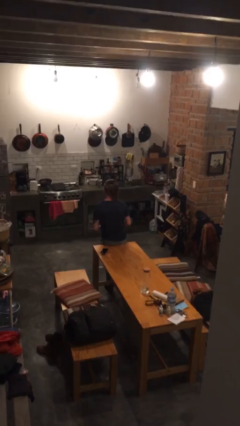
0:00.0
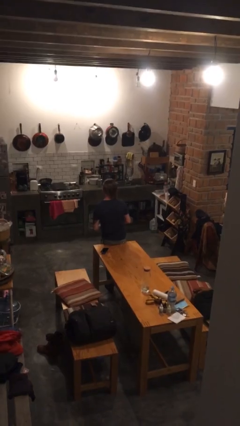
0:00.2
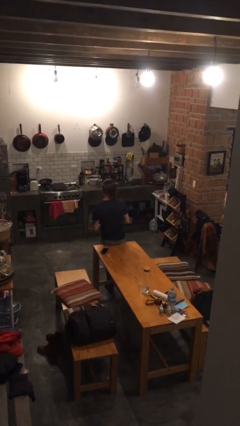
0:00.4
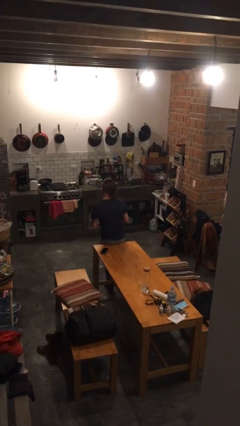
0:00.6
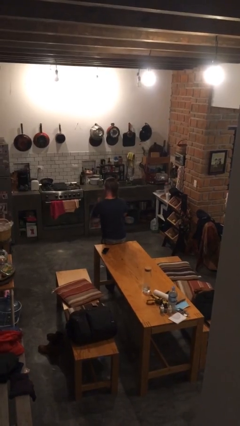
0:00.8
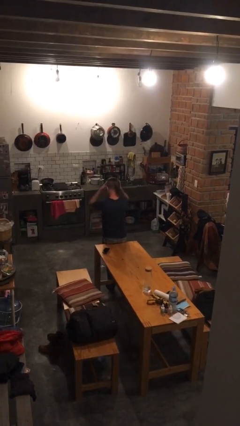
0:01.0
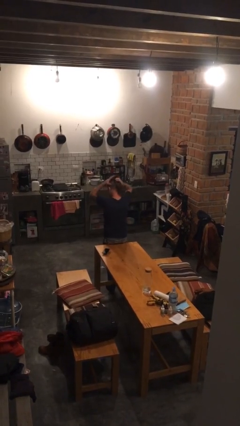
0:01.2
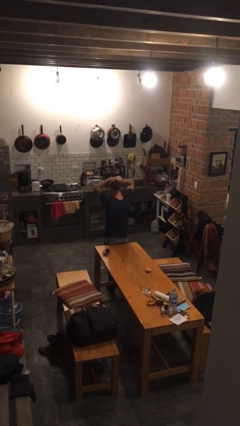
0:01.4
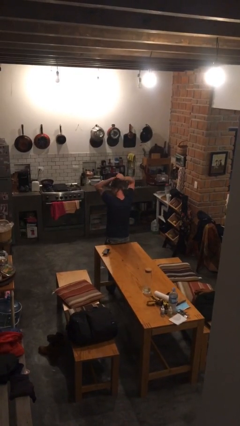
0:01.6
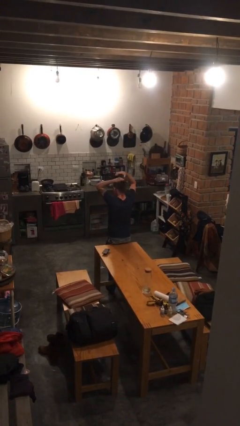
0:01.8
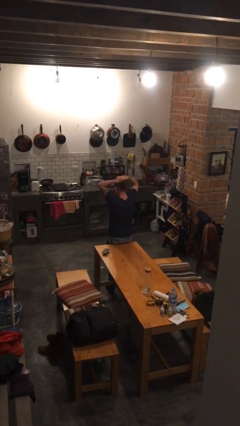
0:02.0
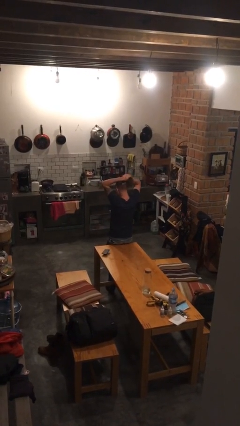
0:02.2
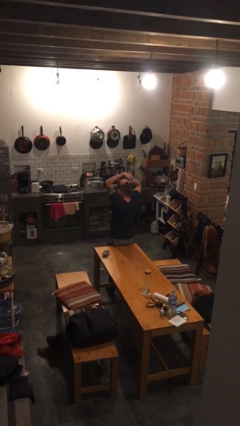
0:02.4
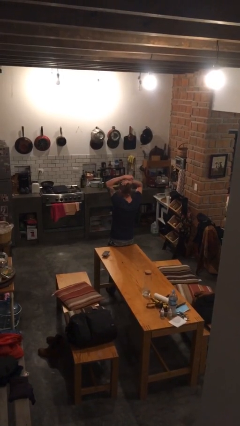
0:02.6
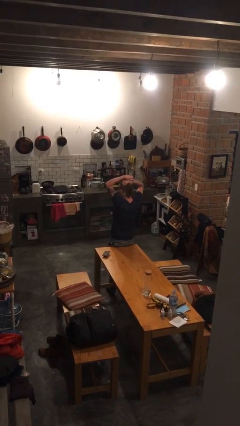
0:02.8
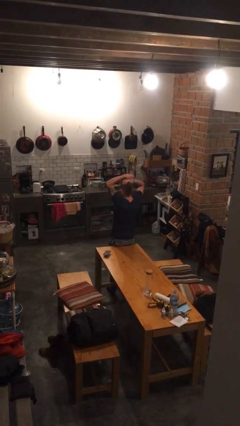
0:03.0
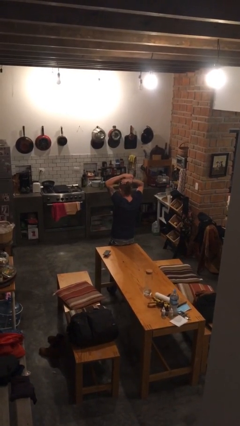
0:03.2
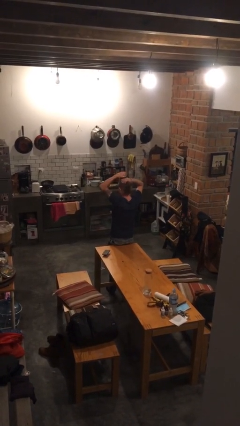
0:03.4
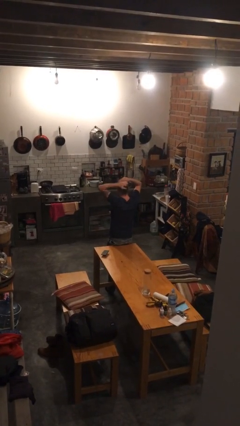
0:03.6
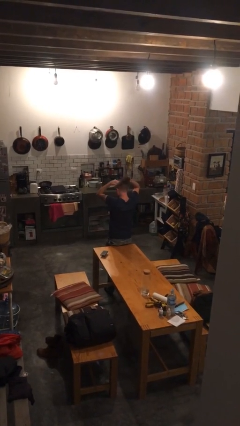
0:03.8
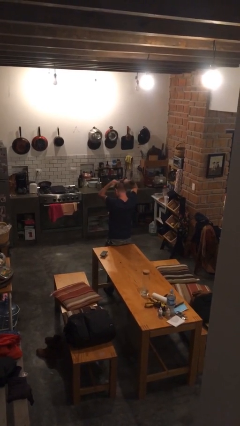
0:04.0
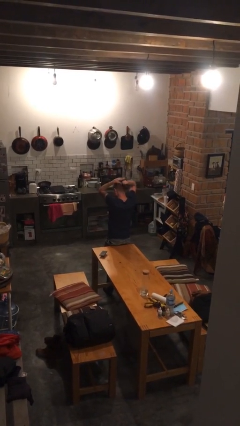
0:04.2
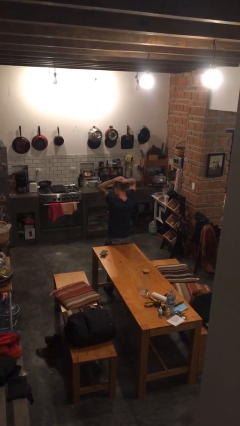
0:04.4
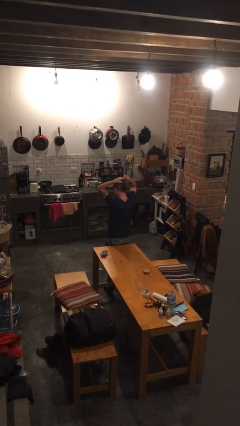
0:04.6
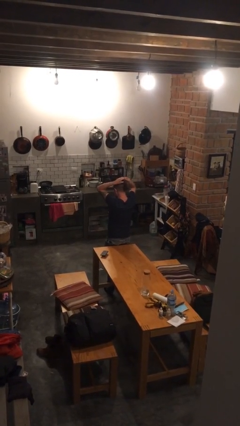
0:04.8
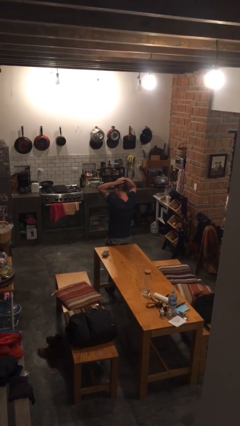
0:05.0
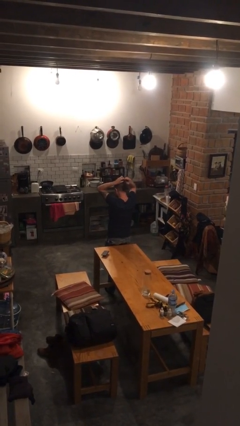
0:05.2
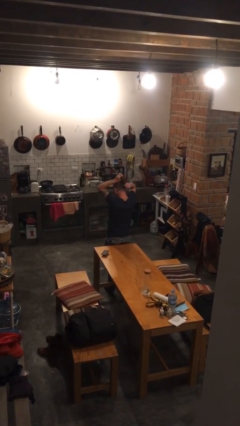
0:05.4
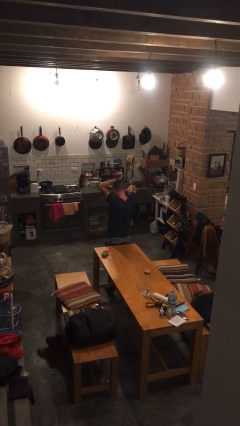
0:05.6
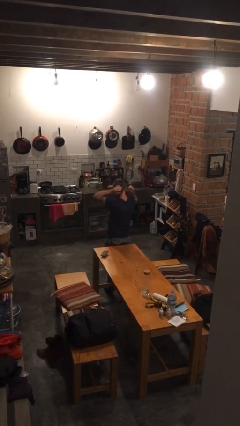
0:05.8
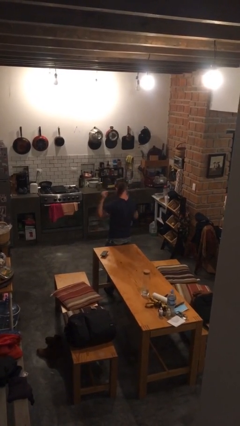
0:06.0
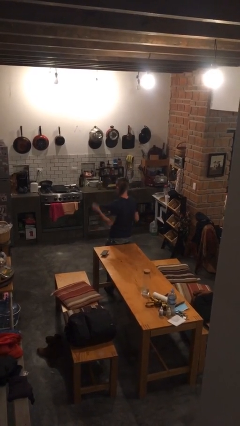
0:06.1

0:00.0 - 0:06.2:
person puts hair in ponytail

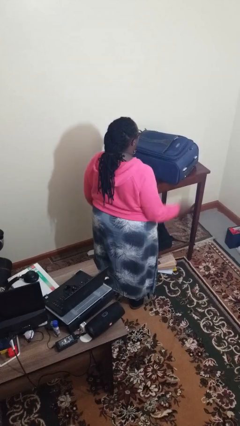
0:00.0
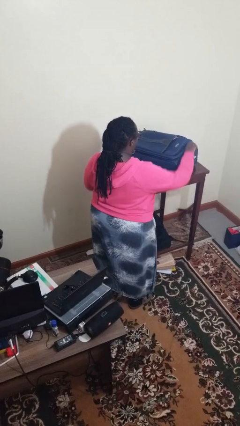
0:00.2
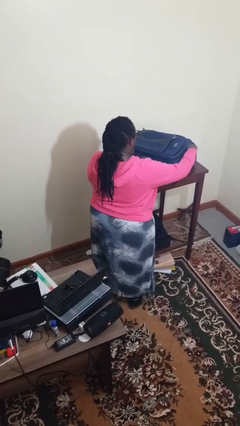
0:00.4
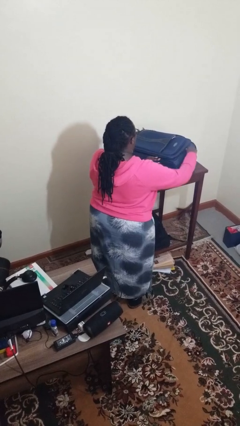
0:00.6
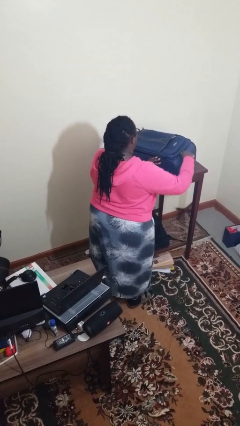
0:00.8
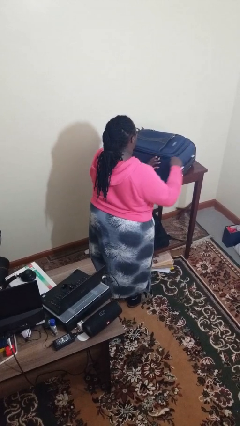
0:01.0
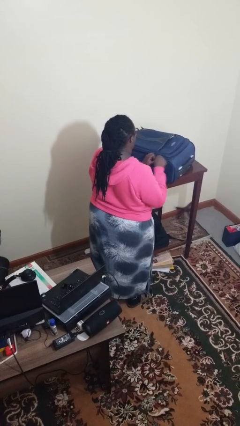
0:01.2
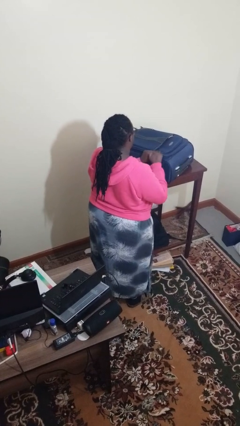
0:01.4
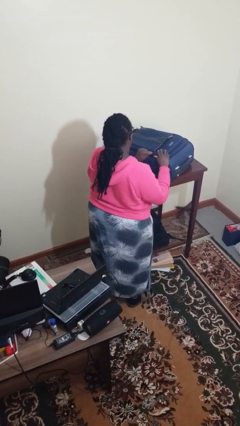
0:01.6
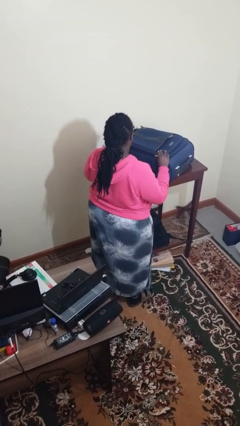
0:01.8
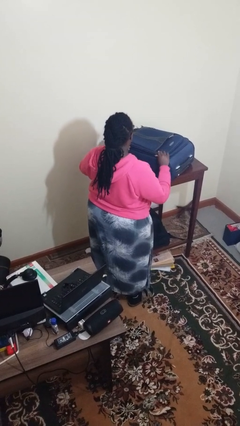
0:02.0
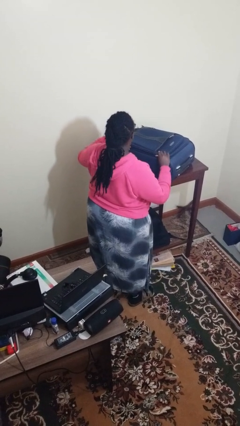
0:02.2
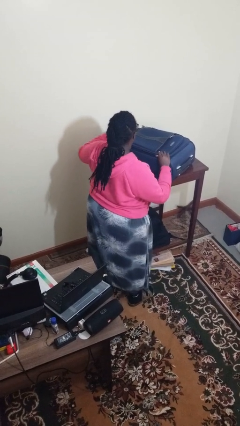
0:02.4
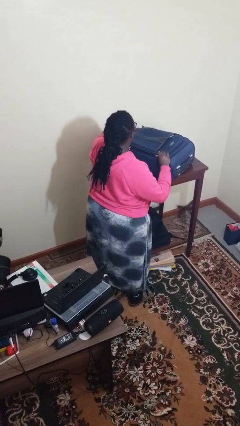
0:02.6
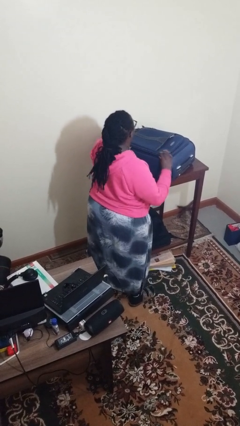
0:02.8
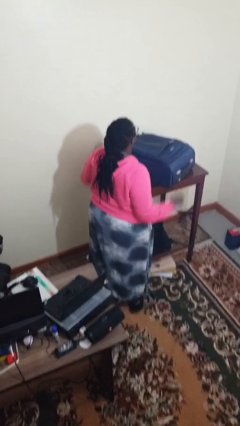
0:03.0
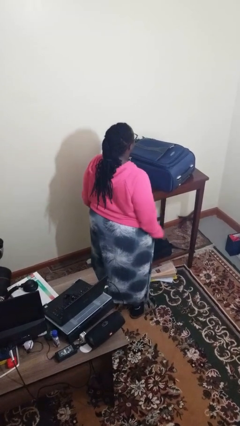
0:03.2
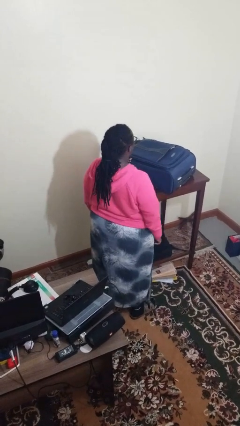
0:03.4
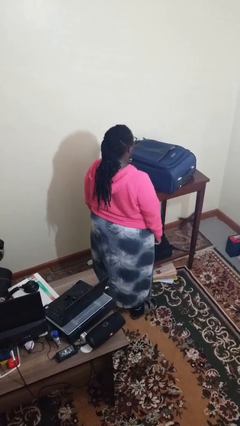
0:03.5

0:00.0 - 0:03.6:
person closes suitcase

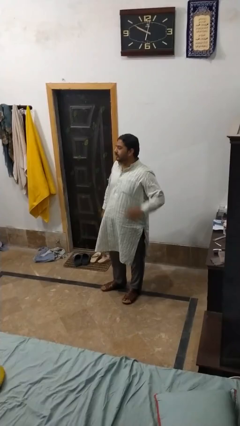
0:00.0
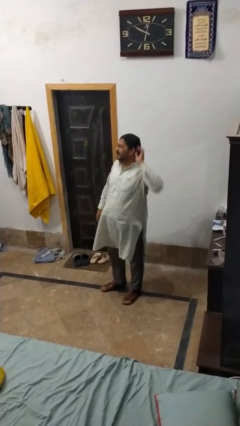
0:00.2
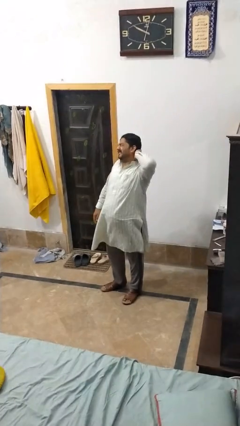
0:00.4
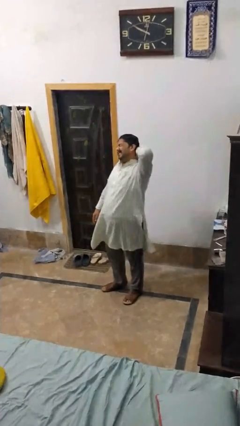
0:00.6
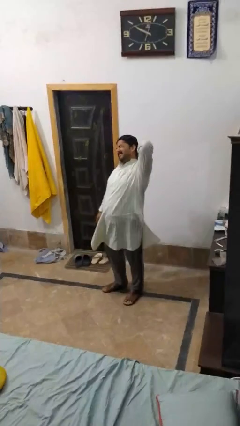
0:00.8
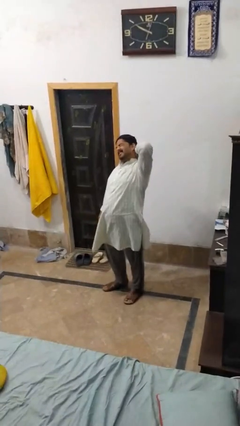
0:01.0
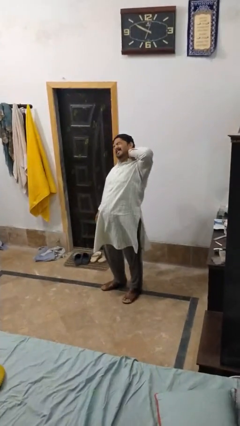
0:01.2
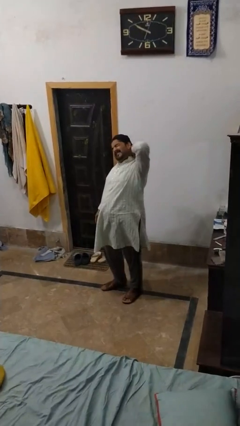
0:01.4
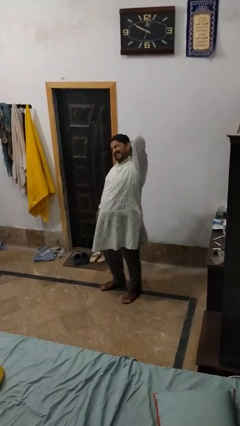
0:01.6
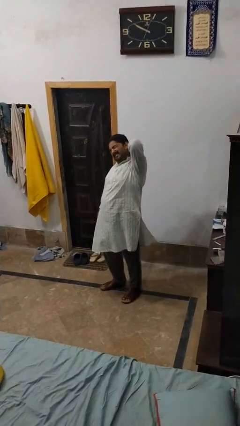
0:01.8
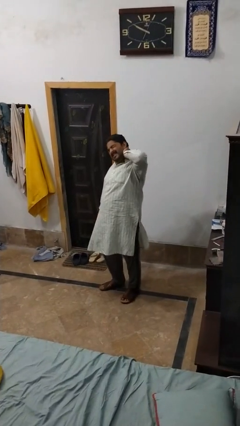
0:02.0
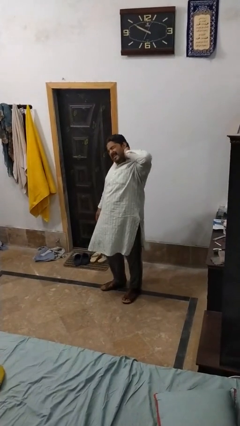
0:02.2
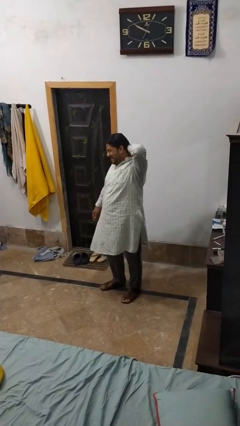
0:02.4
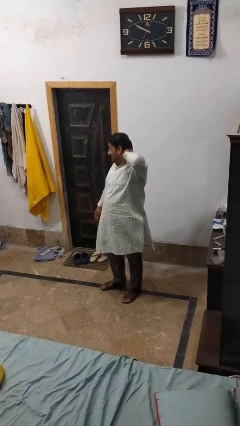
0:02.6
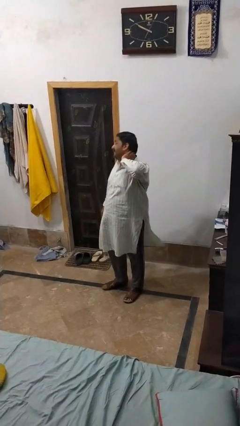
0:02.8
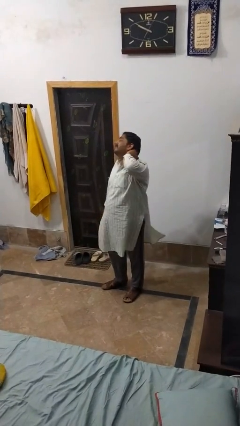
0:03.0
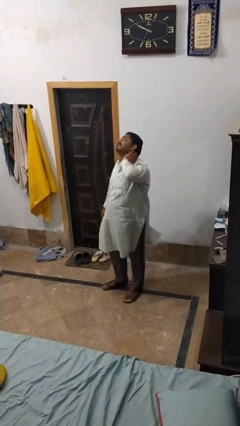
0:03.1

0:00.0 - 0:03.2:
person rubs neck

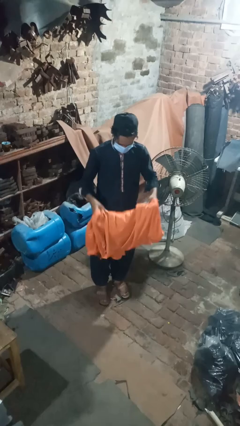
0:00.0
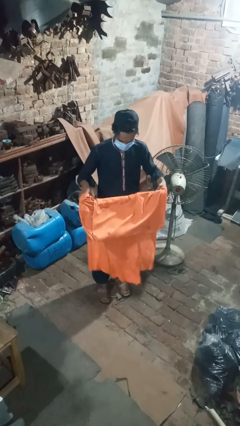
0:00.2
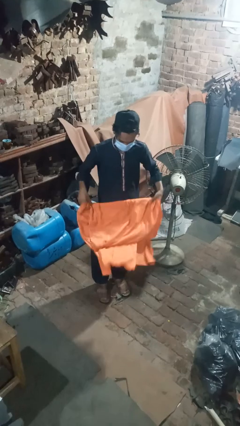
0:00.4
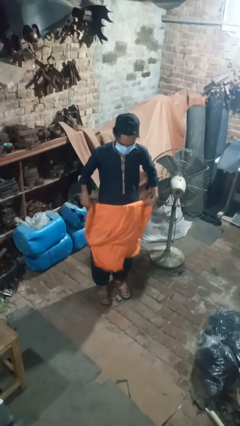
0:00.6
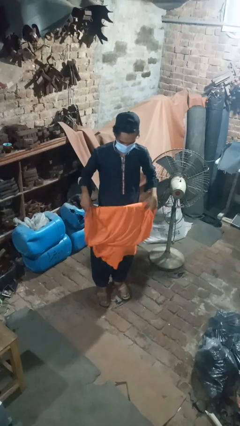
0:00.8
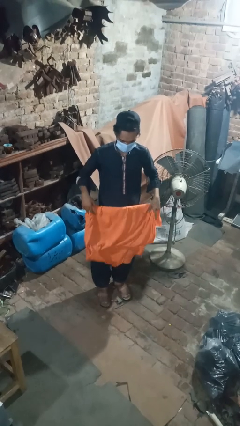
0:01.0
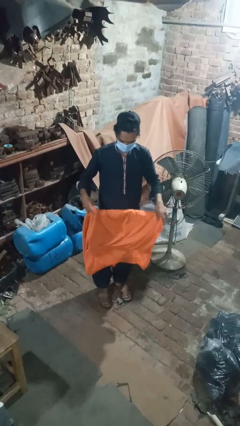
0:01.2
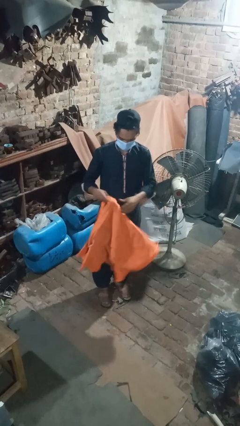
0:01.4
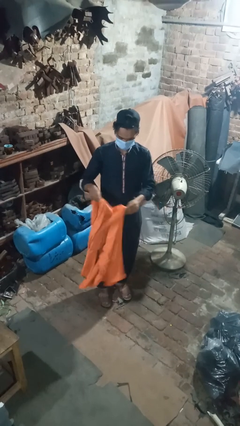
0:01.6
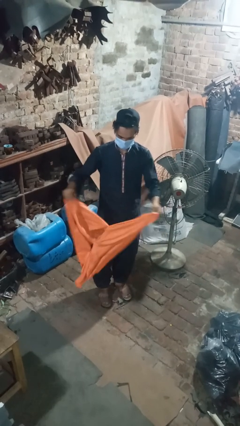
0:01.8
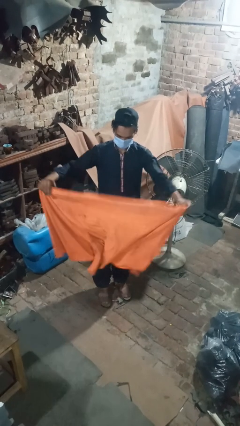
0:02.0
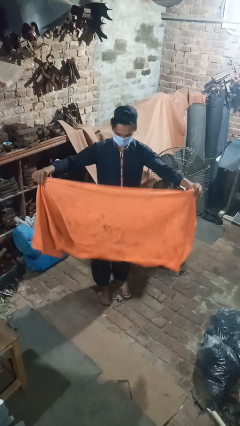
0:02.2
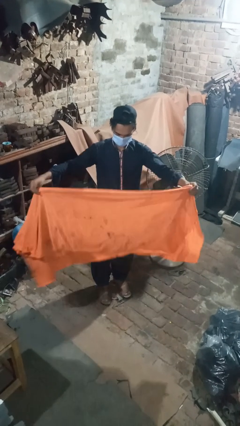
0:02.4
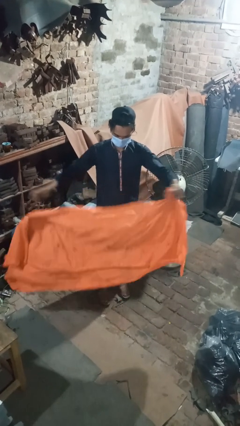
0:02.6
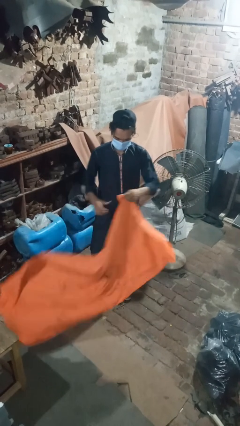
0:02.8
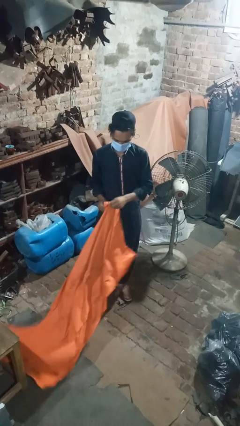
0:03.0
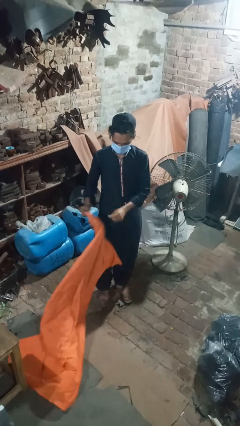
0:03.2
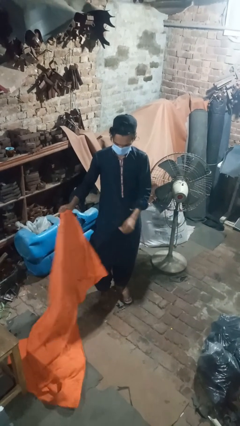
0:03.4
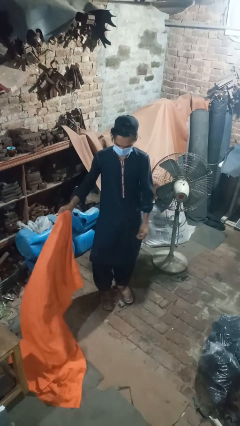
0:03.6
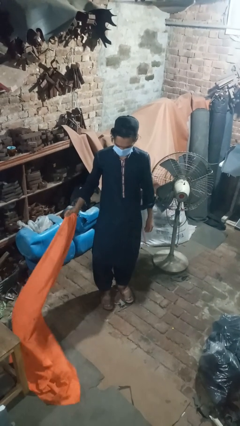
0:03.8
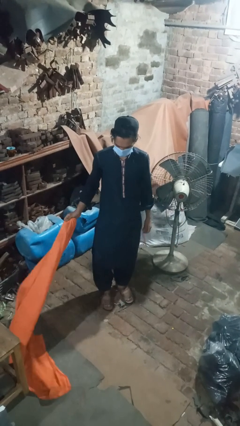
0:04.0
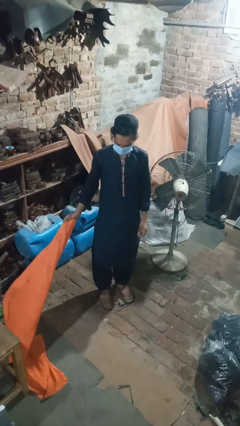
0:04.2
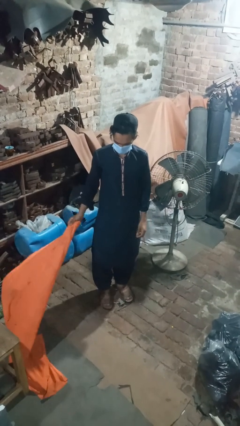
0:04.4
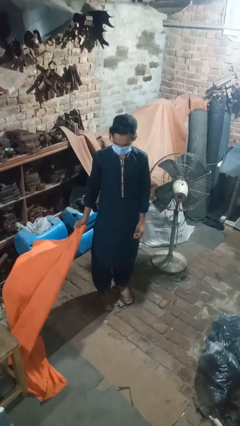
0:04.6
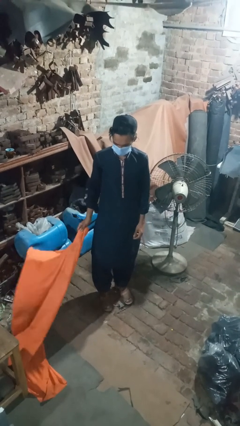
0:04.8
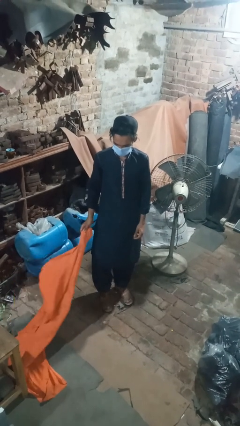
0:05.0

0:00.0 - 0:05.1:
person unfolds blanket
